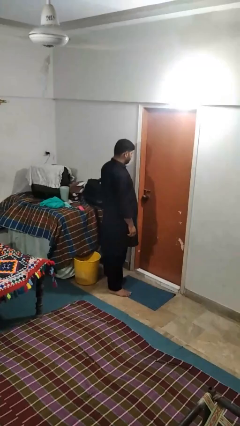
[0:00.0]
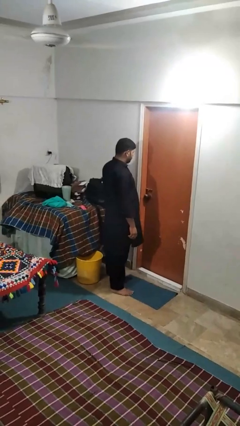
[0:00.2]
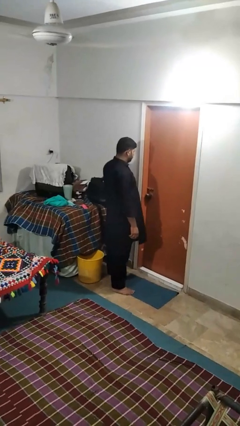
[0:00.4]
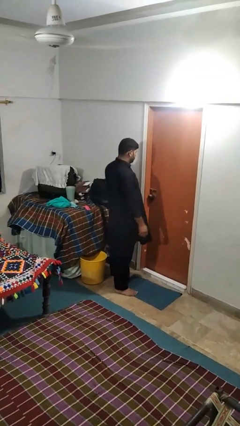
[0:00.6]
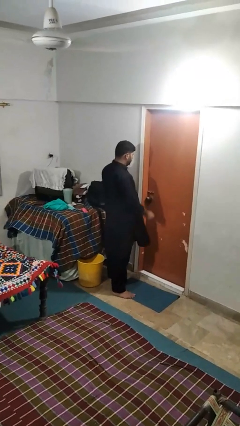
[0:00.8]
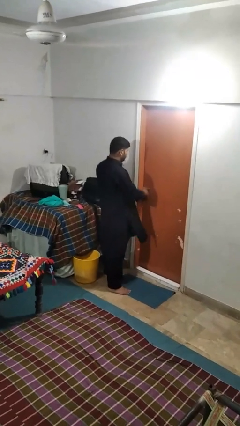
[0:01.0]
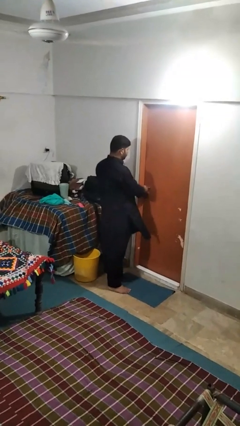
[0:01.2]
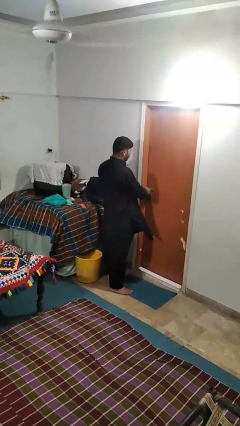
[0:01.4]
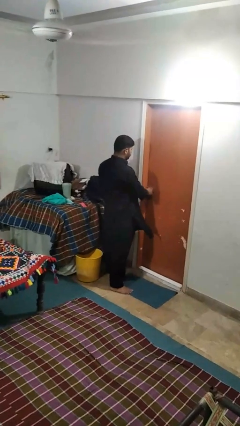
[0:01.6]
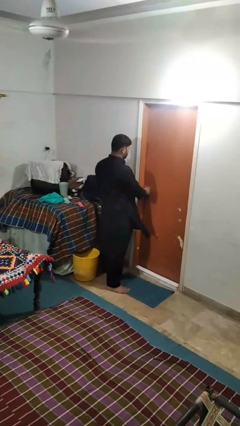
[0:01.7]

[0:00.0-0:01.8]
person unlocks door with keys

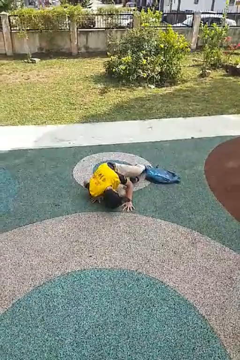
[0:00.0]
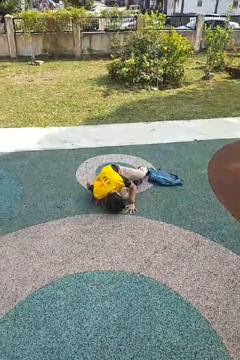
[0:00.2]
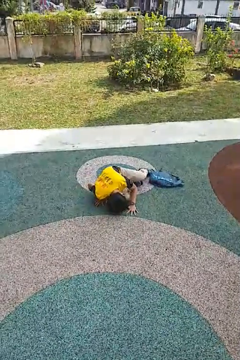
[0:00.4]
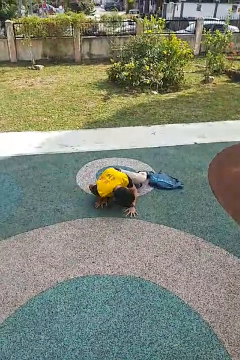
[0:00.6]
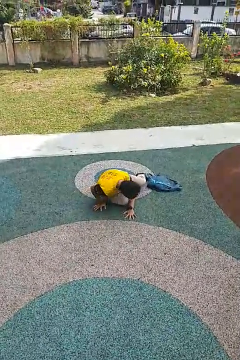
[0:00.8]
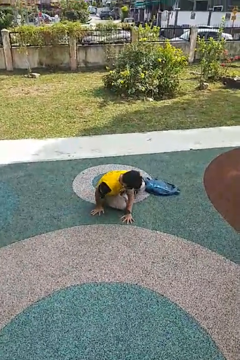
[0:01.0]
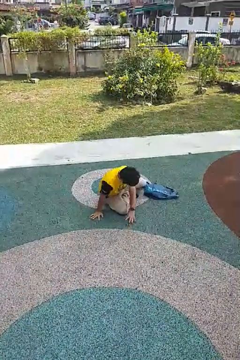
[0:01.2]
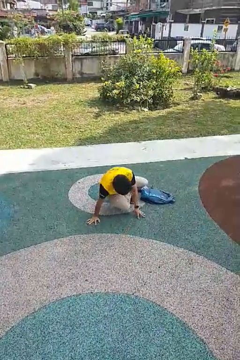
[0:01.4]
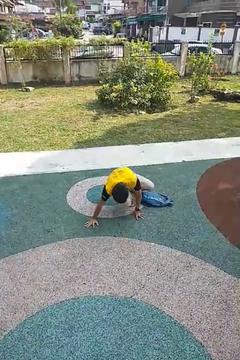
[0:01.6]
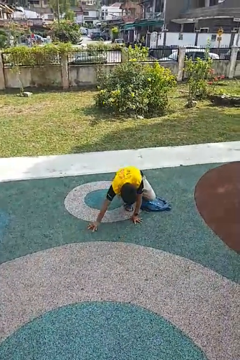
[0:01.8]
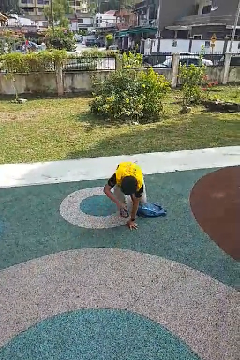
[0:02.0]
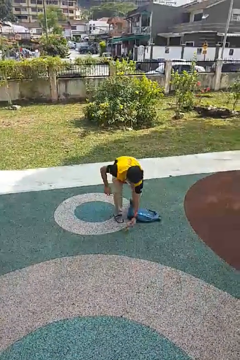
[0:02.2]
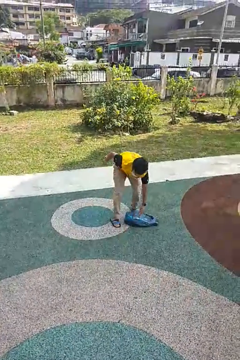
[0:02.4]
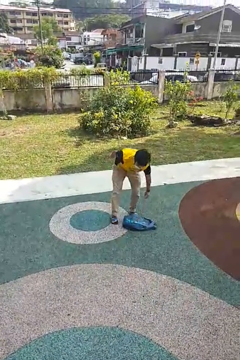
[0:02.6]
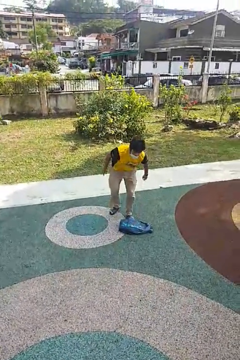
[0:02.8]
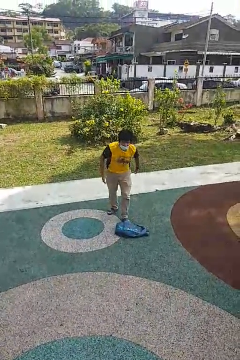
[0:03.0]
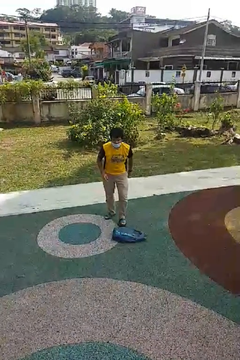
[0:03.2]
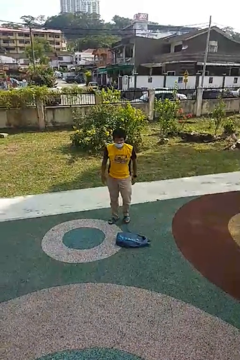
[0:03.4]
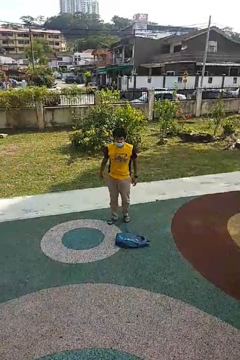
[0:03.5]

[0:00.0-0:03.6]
person stands up from floor

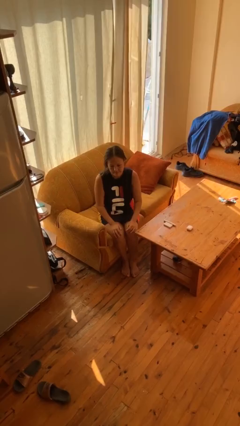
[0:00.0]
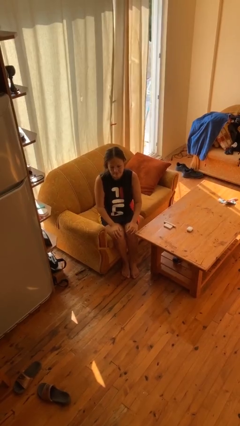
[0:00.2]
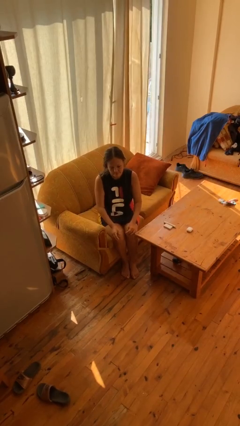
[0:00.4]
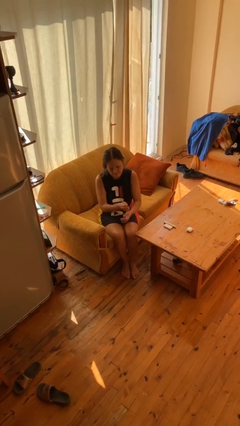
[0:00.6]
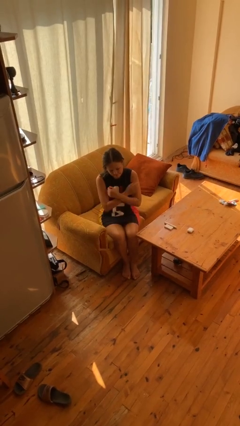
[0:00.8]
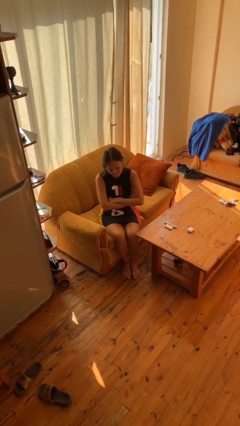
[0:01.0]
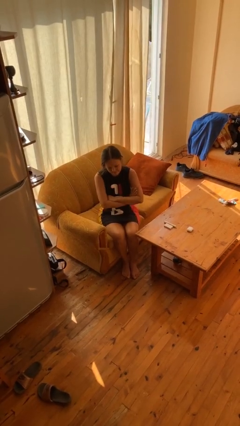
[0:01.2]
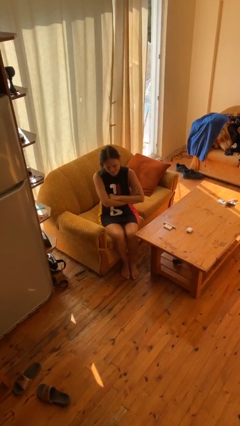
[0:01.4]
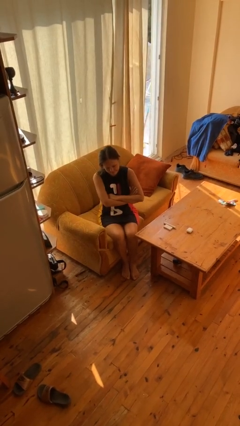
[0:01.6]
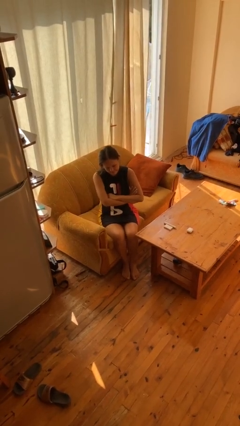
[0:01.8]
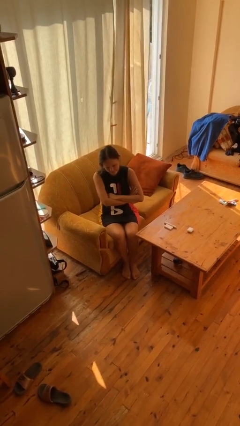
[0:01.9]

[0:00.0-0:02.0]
person crosses arms

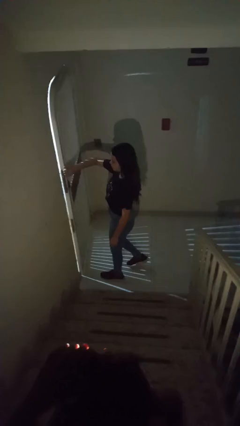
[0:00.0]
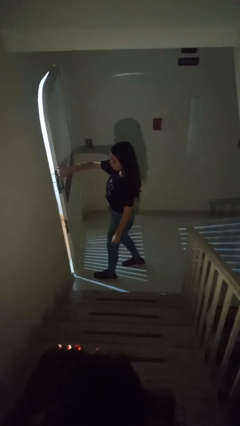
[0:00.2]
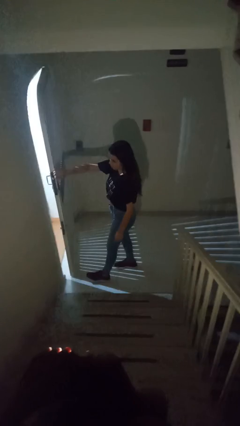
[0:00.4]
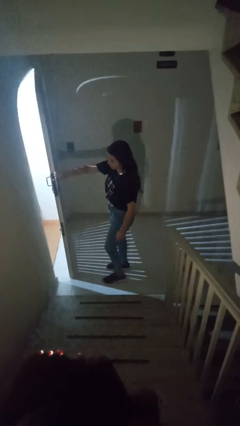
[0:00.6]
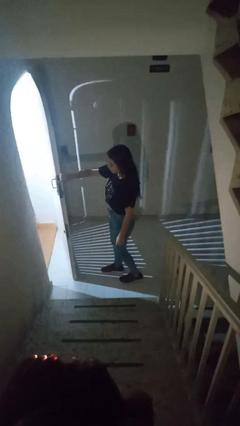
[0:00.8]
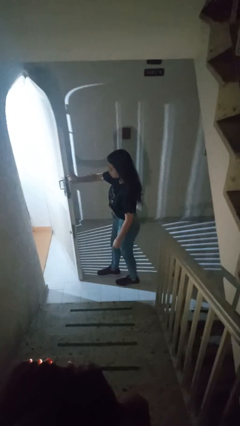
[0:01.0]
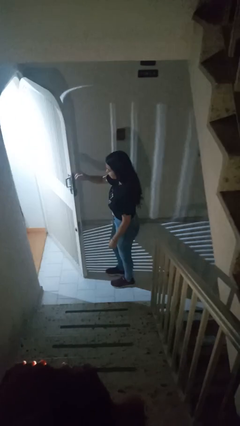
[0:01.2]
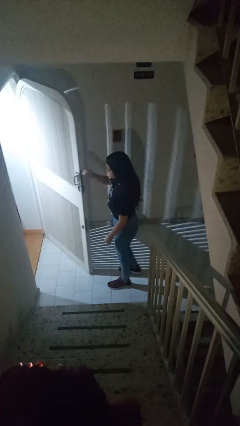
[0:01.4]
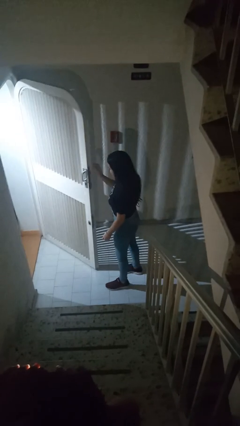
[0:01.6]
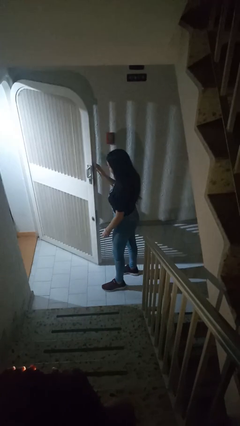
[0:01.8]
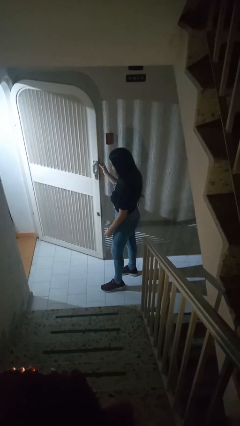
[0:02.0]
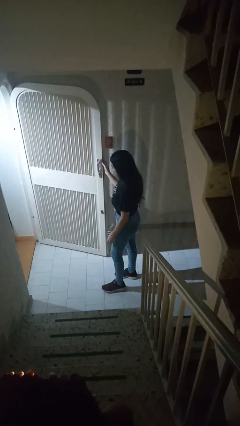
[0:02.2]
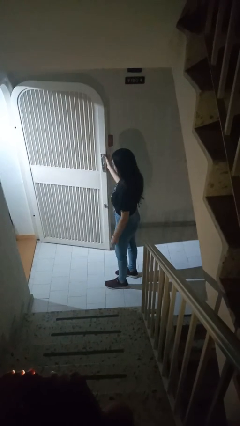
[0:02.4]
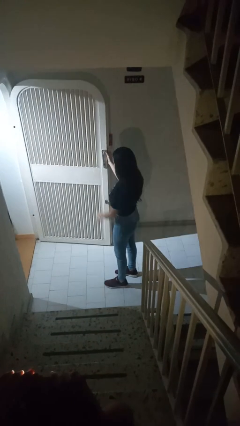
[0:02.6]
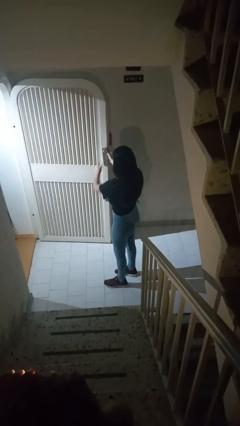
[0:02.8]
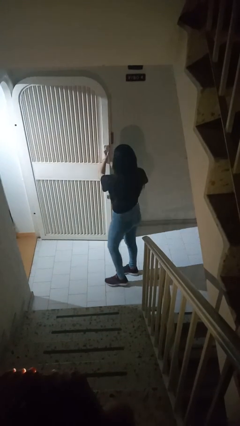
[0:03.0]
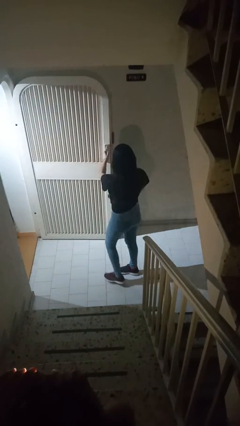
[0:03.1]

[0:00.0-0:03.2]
person opens facility door

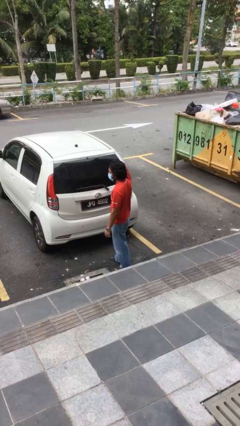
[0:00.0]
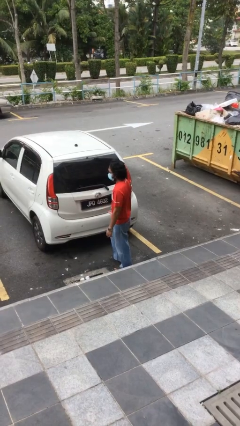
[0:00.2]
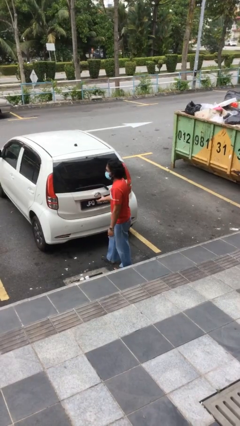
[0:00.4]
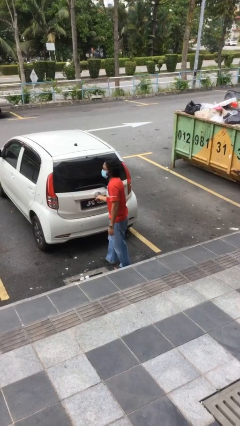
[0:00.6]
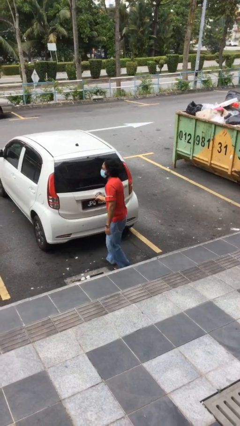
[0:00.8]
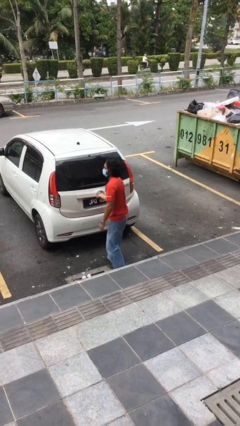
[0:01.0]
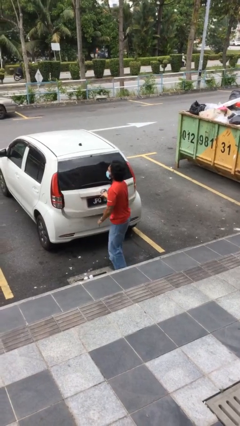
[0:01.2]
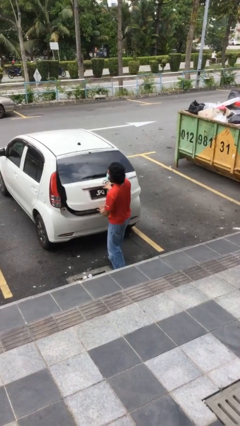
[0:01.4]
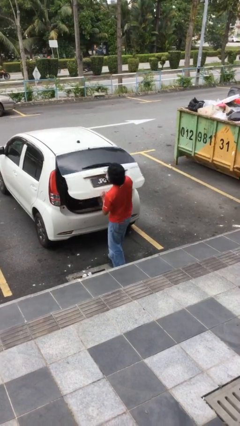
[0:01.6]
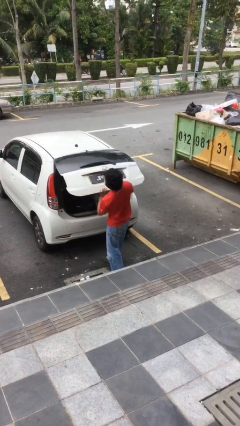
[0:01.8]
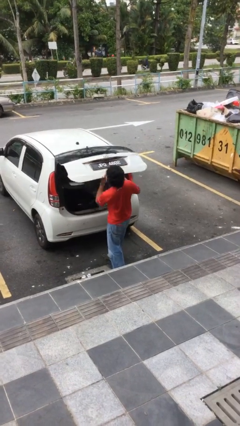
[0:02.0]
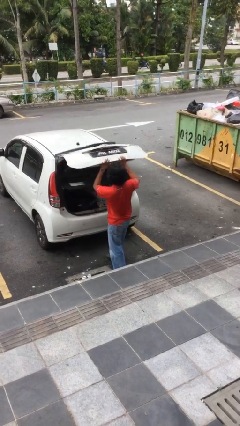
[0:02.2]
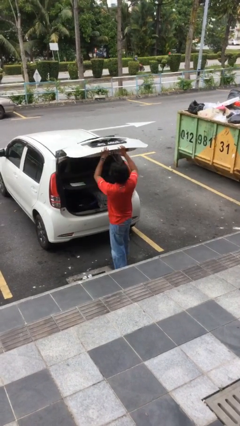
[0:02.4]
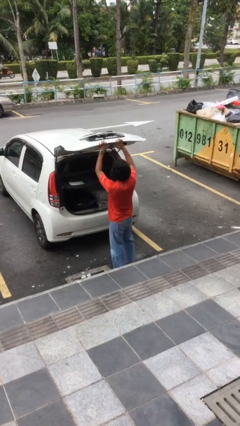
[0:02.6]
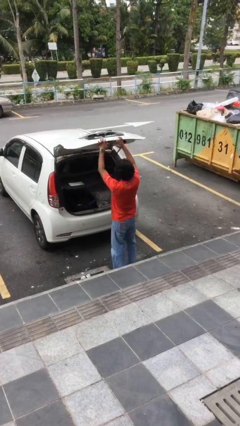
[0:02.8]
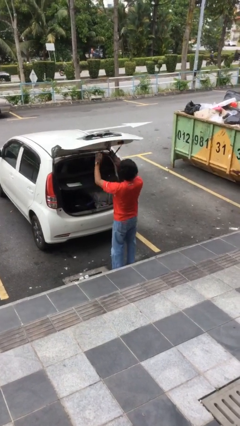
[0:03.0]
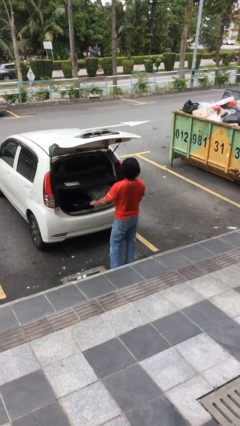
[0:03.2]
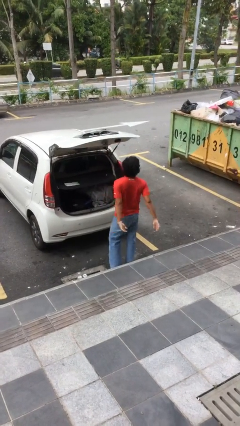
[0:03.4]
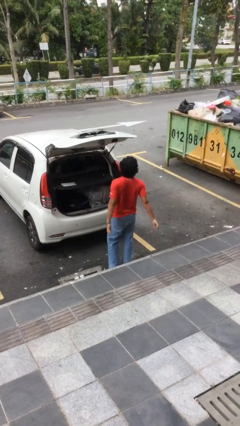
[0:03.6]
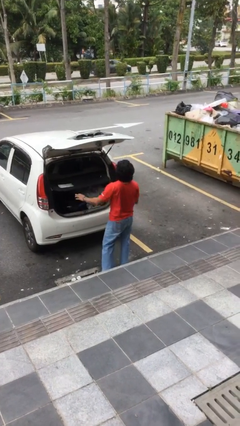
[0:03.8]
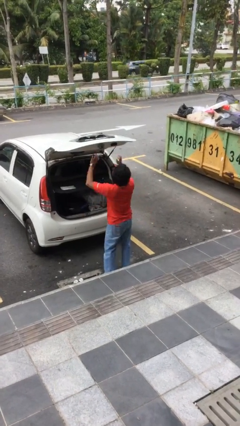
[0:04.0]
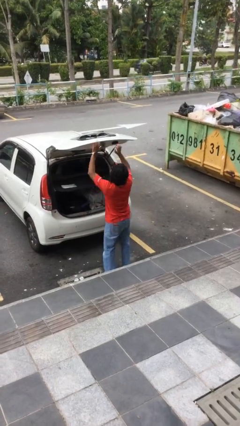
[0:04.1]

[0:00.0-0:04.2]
person opens car trunk

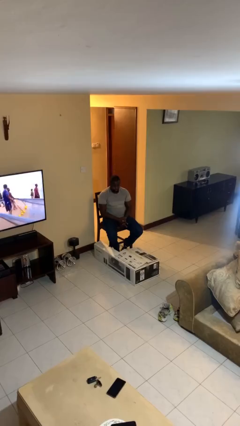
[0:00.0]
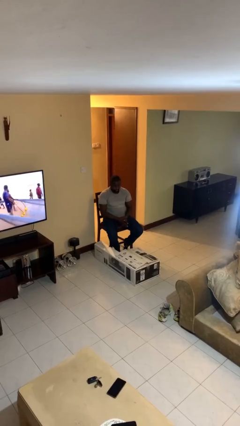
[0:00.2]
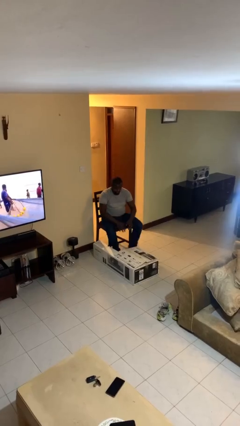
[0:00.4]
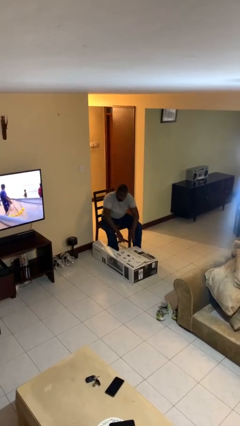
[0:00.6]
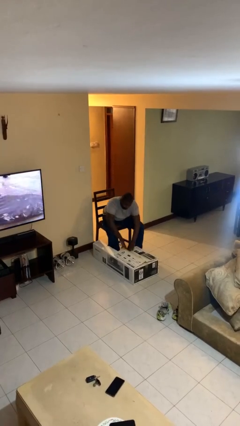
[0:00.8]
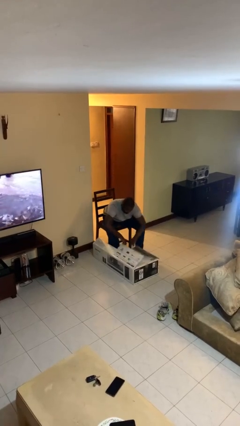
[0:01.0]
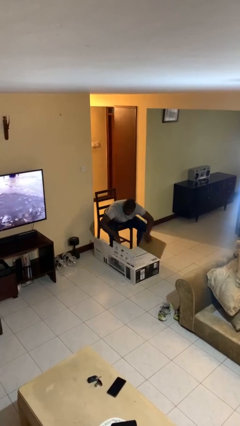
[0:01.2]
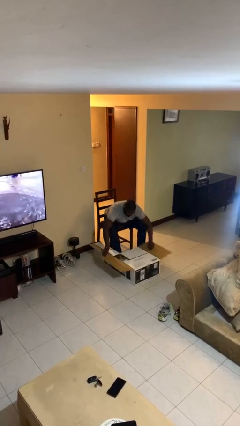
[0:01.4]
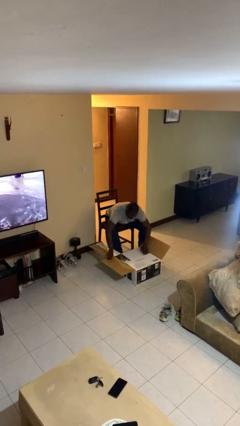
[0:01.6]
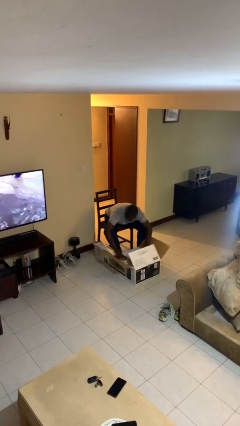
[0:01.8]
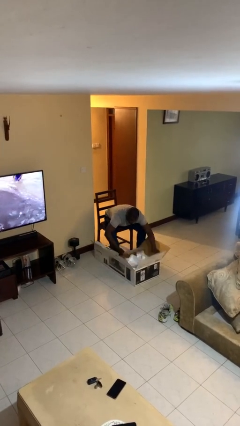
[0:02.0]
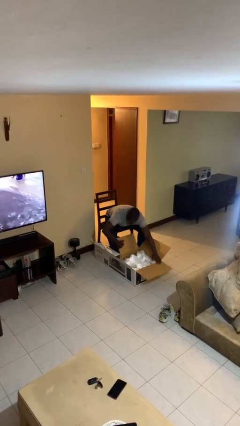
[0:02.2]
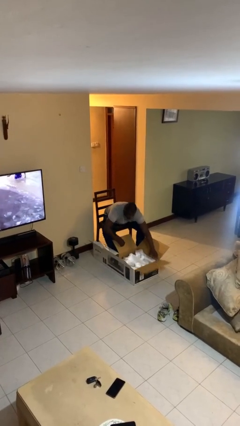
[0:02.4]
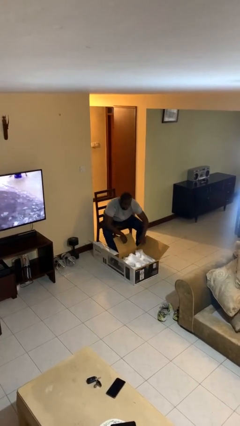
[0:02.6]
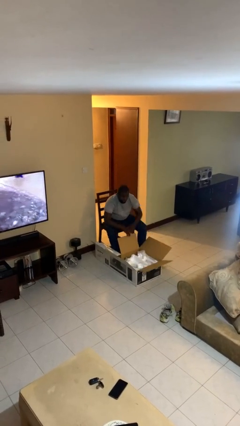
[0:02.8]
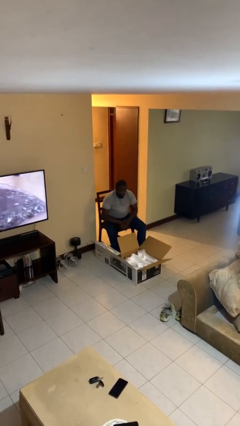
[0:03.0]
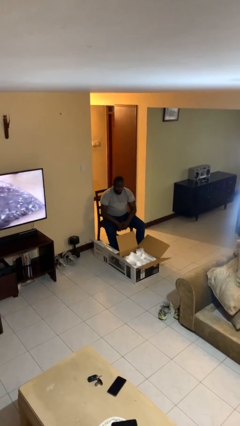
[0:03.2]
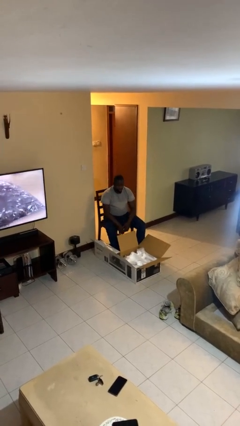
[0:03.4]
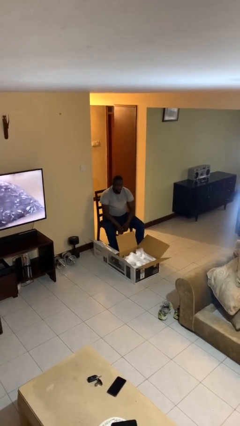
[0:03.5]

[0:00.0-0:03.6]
person opens box
